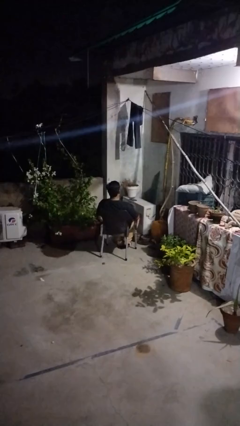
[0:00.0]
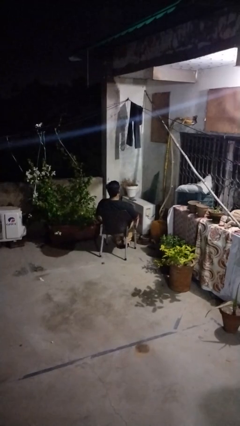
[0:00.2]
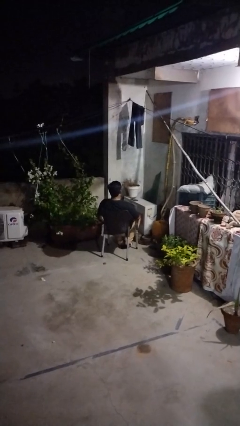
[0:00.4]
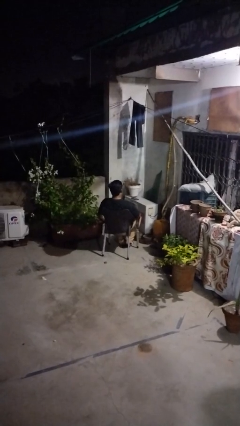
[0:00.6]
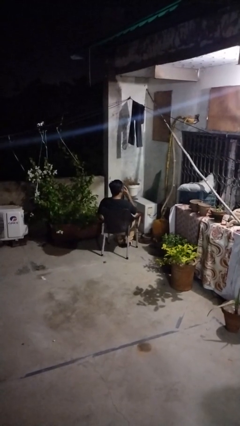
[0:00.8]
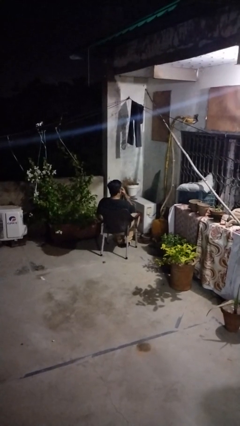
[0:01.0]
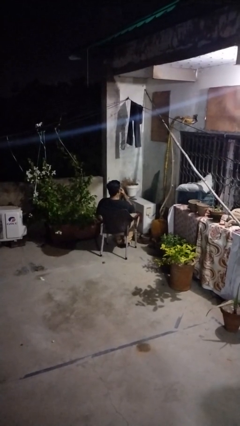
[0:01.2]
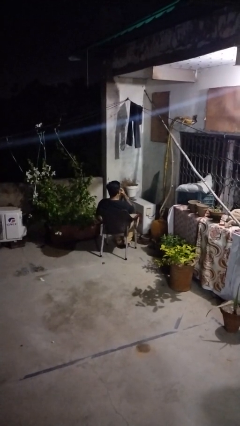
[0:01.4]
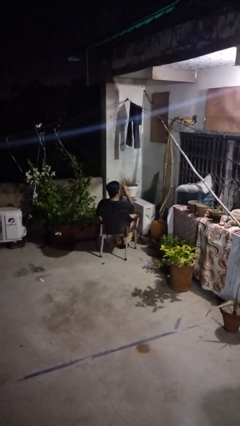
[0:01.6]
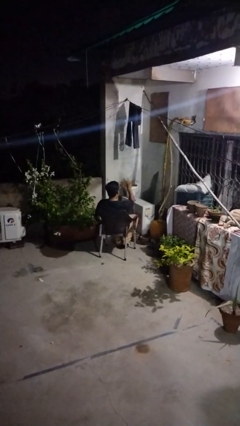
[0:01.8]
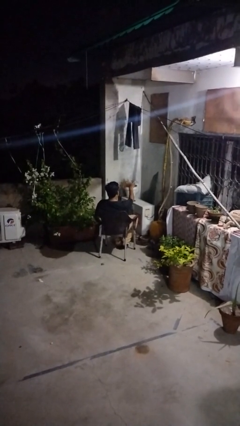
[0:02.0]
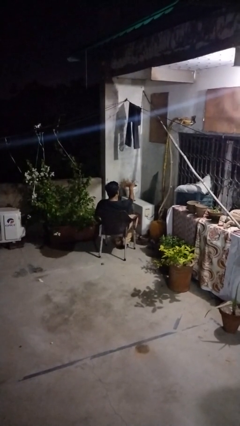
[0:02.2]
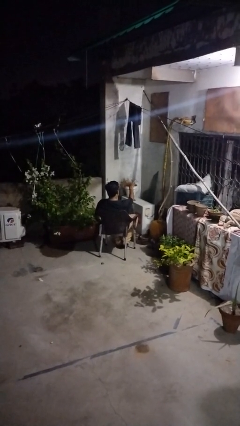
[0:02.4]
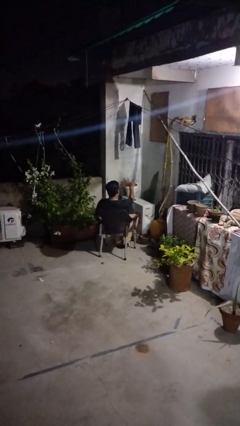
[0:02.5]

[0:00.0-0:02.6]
person gestures watch closely

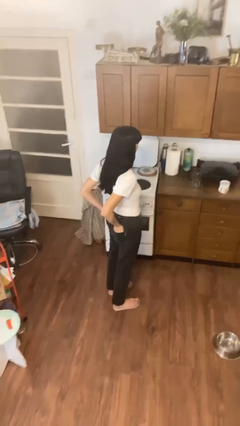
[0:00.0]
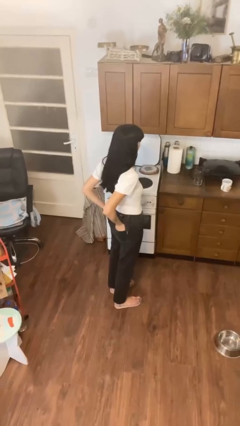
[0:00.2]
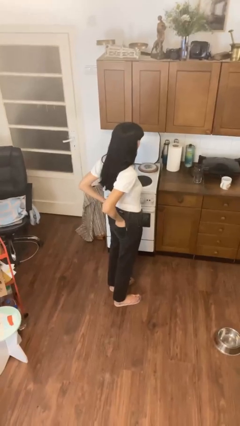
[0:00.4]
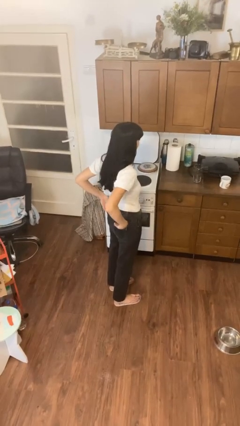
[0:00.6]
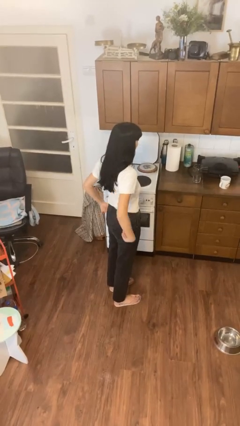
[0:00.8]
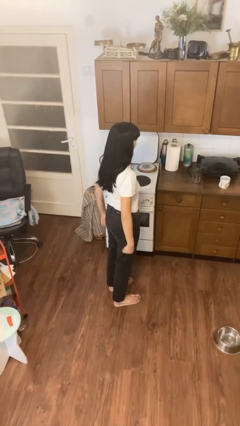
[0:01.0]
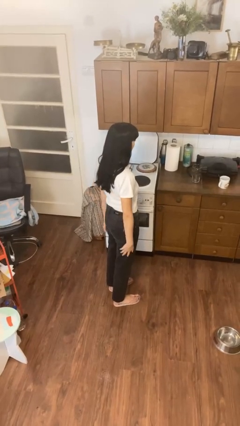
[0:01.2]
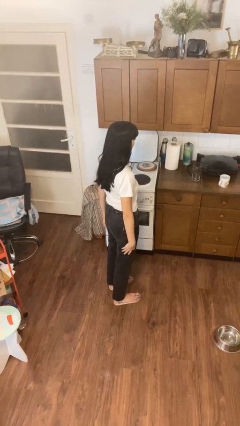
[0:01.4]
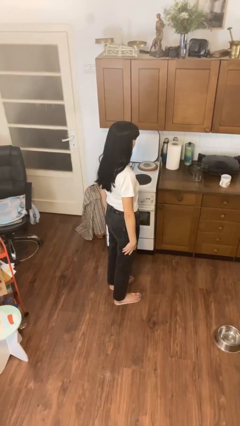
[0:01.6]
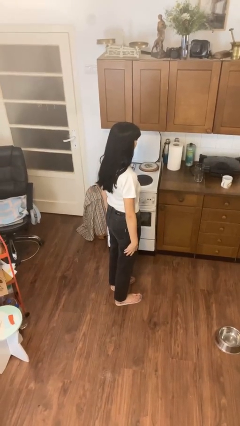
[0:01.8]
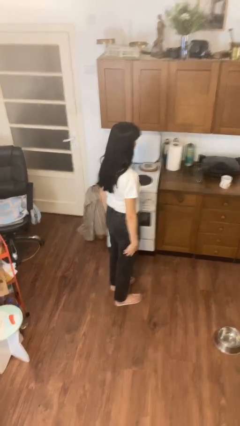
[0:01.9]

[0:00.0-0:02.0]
person puts hands in back pockets

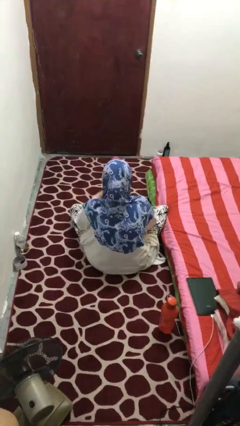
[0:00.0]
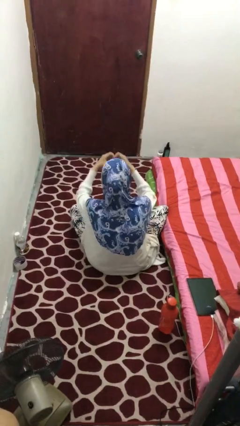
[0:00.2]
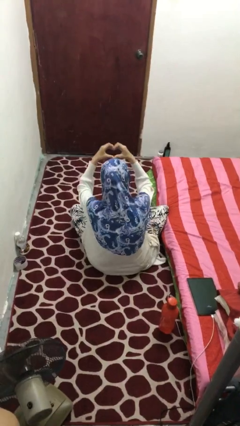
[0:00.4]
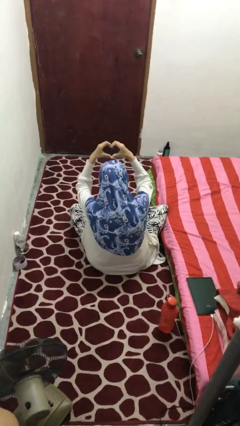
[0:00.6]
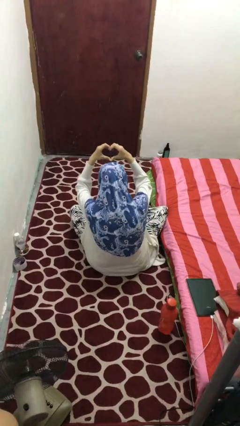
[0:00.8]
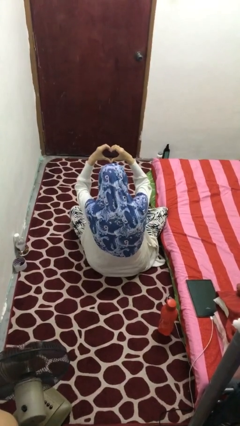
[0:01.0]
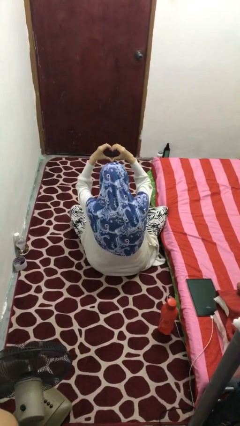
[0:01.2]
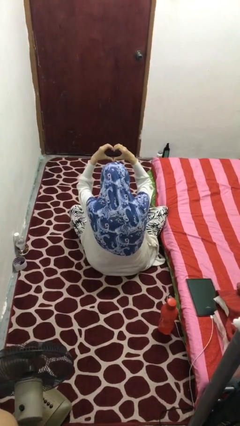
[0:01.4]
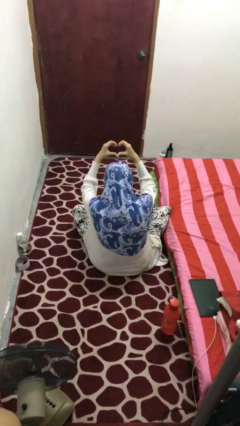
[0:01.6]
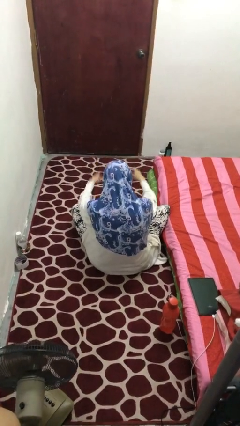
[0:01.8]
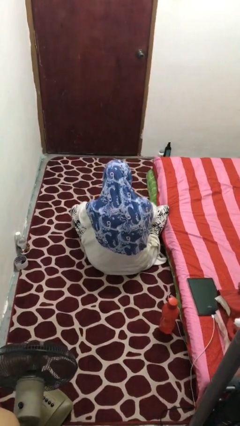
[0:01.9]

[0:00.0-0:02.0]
person gestures heart

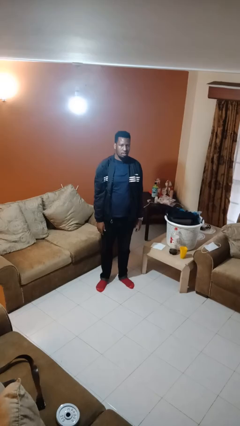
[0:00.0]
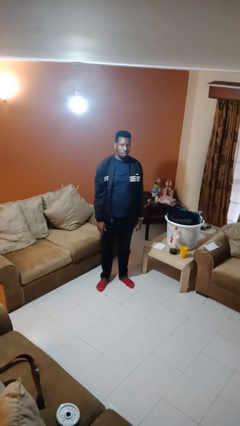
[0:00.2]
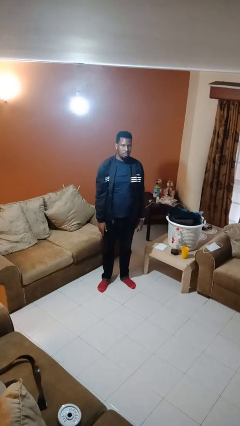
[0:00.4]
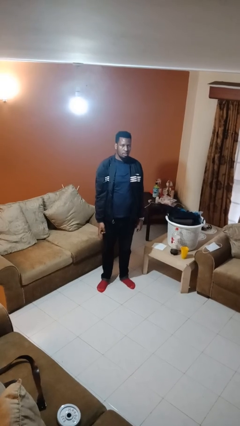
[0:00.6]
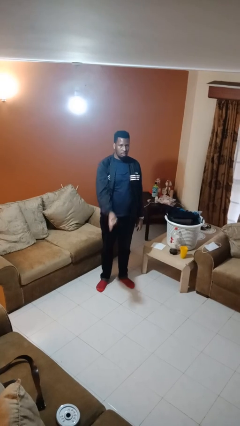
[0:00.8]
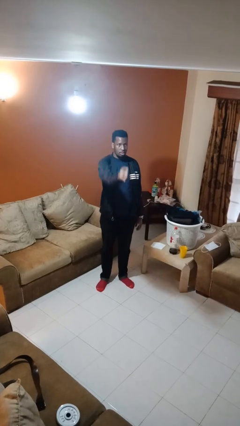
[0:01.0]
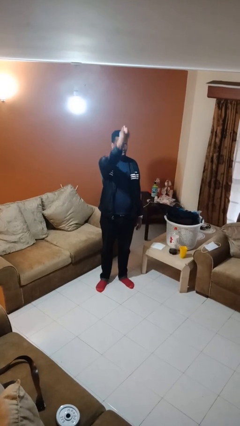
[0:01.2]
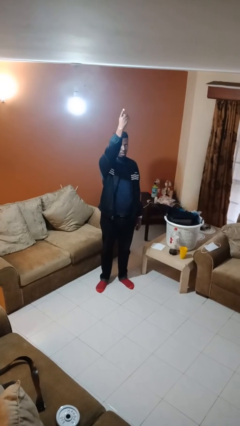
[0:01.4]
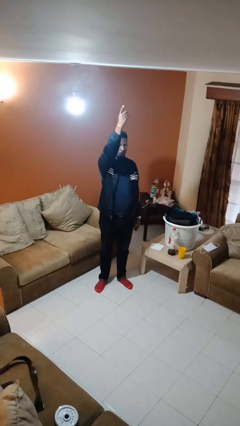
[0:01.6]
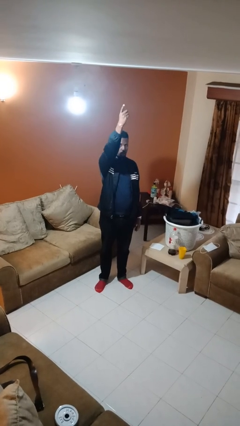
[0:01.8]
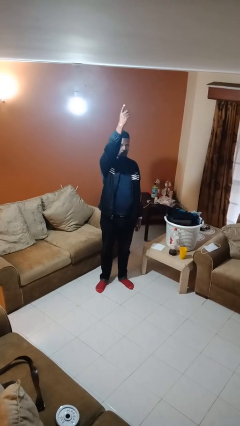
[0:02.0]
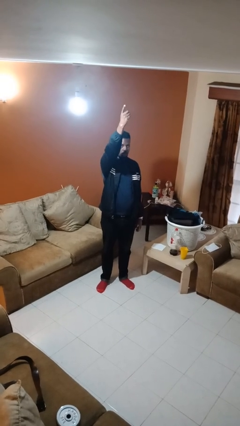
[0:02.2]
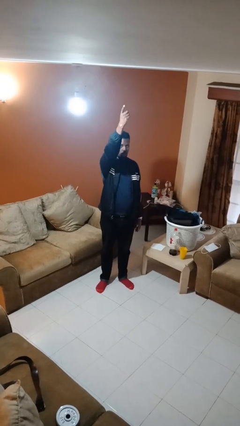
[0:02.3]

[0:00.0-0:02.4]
person gestures swipe up

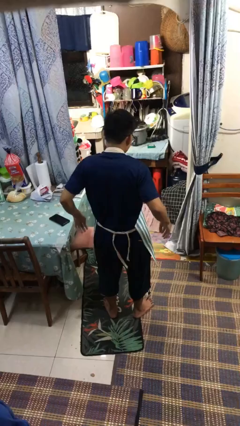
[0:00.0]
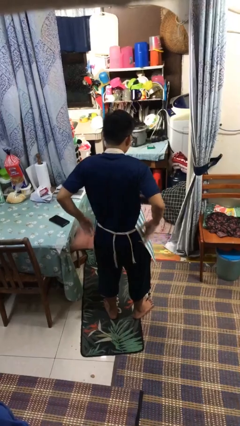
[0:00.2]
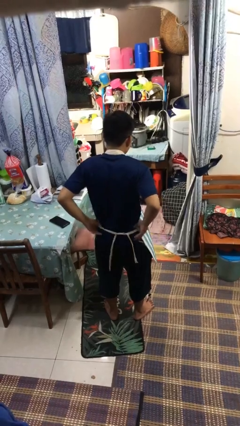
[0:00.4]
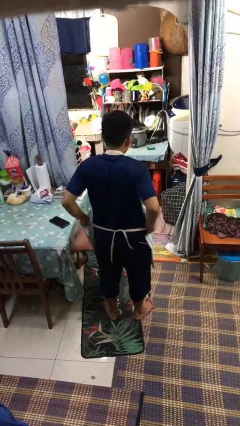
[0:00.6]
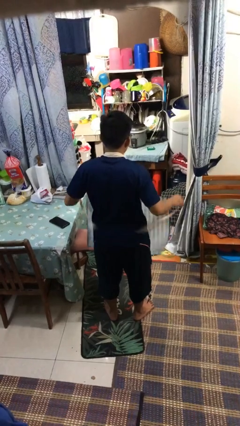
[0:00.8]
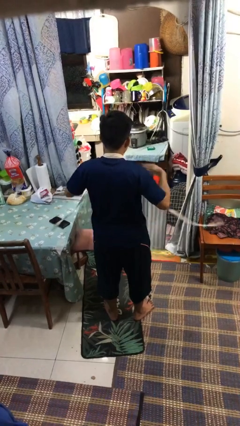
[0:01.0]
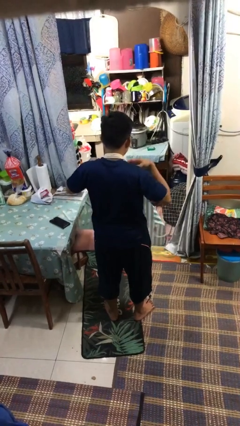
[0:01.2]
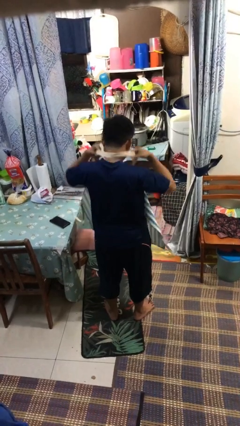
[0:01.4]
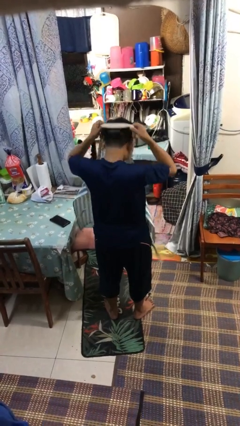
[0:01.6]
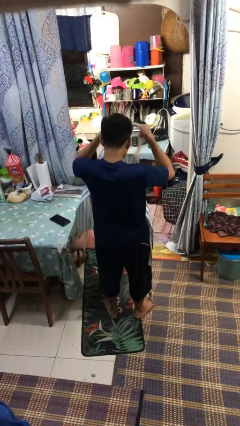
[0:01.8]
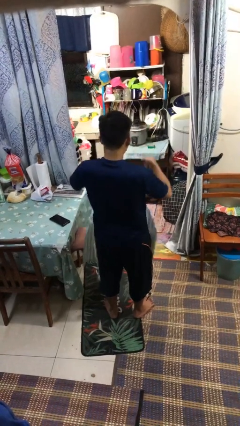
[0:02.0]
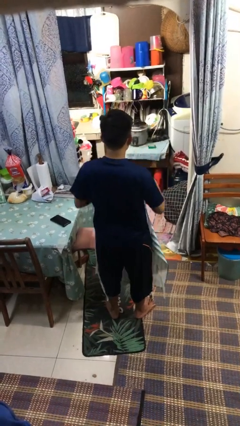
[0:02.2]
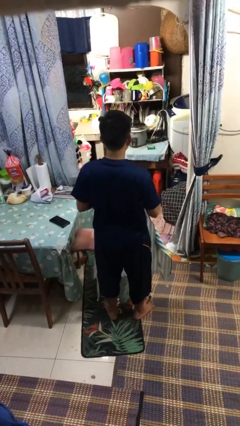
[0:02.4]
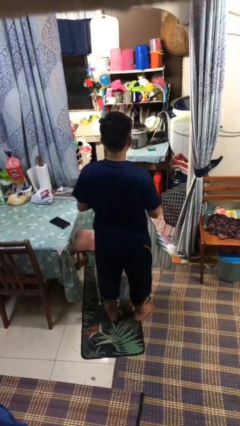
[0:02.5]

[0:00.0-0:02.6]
person takes off apron

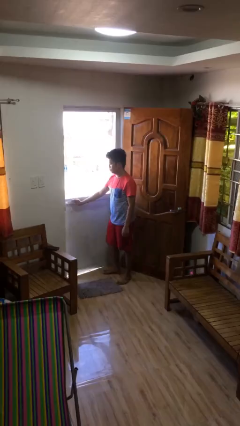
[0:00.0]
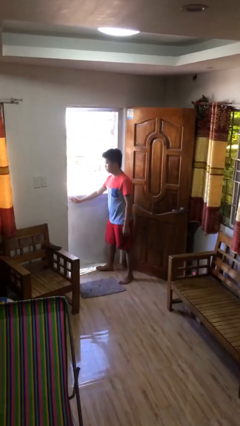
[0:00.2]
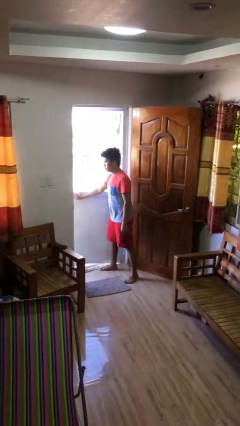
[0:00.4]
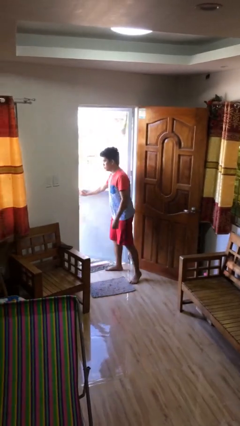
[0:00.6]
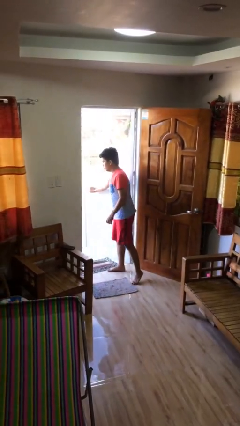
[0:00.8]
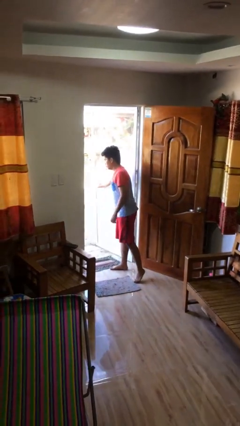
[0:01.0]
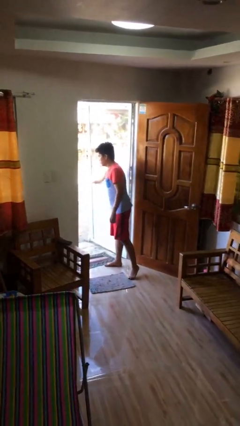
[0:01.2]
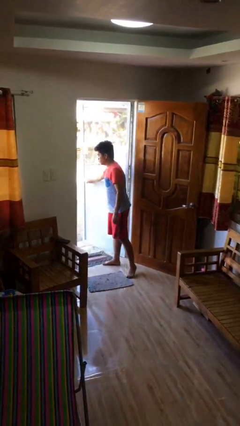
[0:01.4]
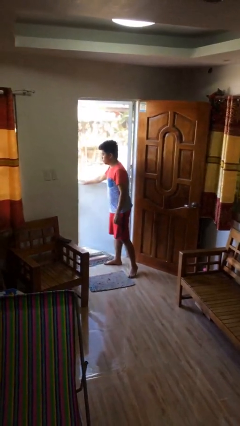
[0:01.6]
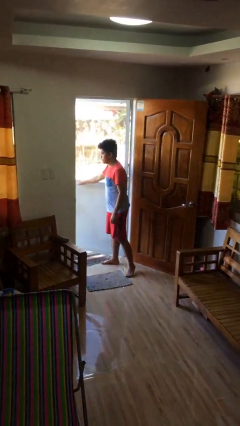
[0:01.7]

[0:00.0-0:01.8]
person opens facility door

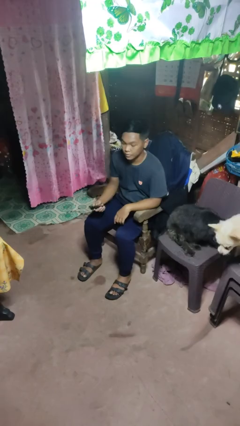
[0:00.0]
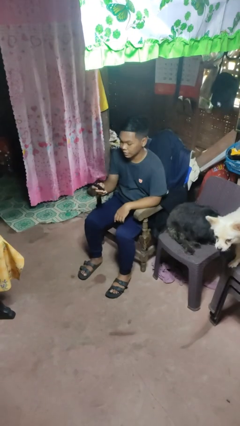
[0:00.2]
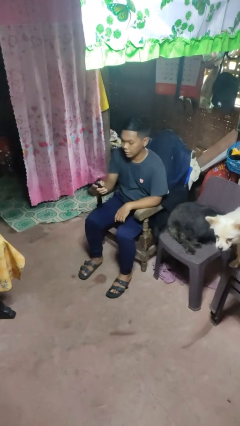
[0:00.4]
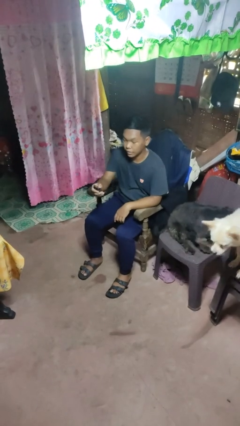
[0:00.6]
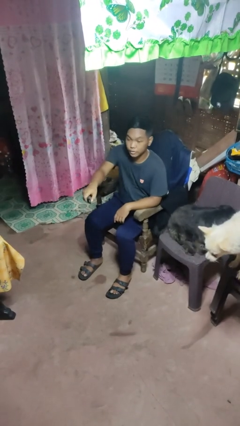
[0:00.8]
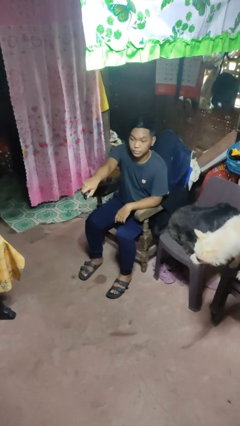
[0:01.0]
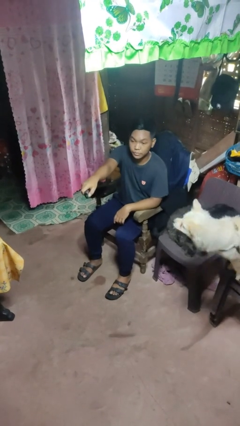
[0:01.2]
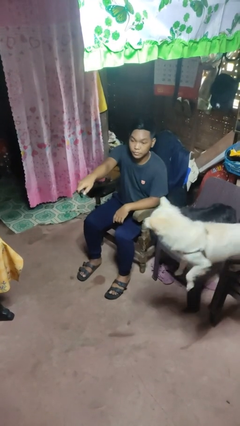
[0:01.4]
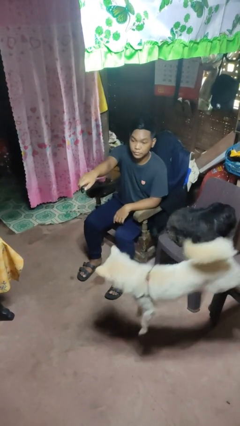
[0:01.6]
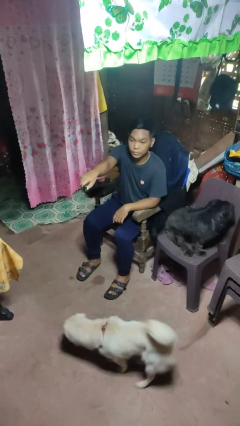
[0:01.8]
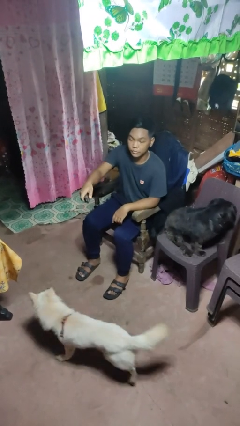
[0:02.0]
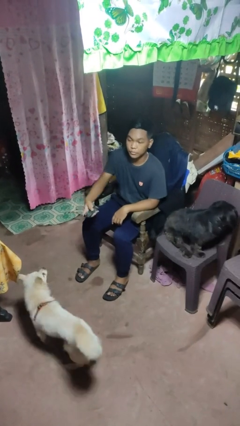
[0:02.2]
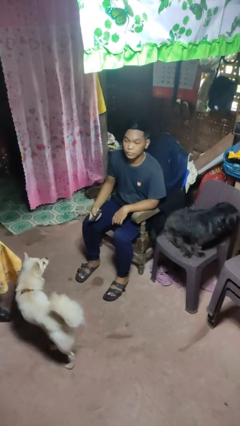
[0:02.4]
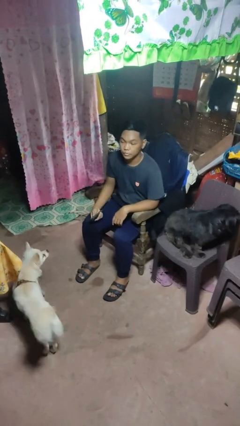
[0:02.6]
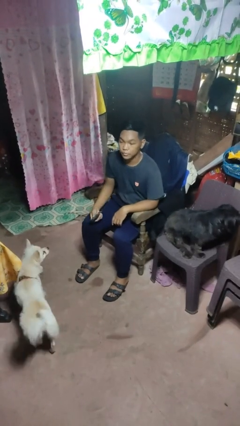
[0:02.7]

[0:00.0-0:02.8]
person uses television remote

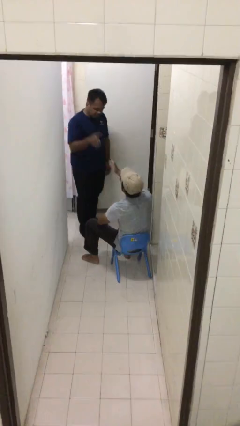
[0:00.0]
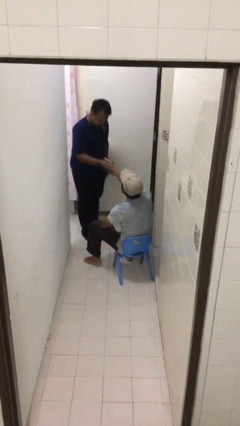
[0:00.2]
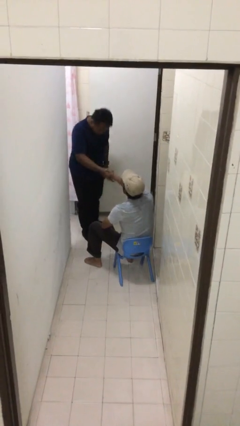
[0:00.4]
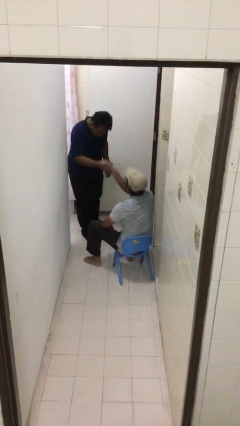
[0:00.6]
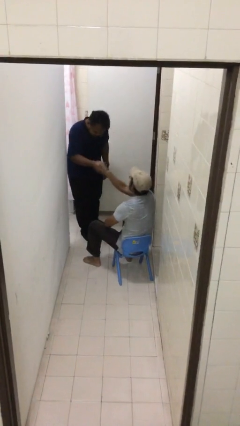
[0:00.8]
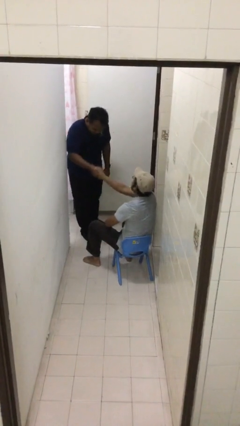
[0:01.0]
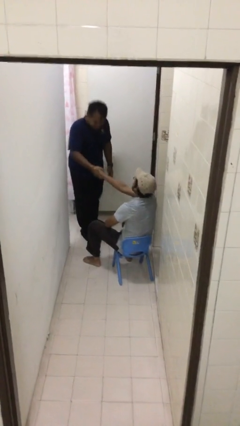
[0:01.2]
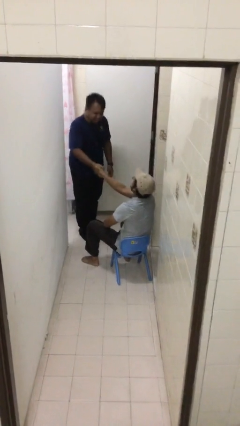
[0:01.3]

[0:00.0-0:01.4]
person shakes hand
